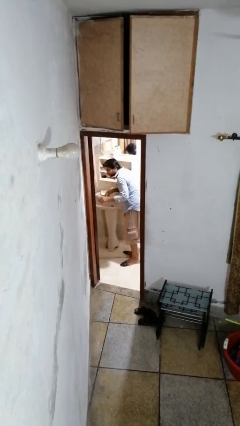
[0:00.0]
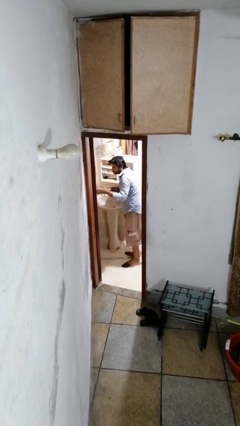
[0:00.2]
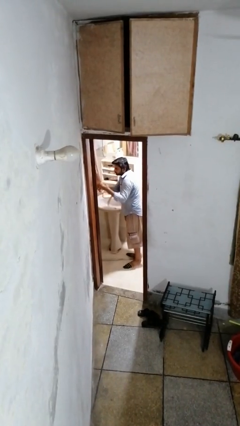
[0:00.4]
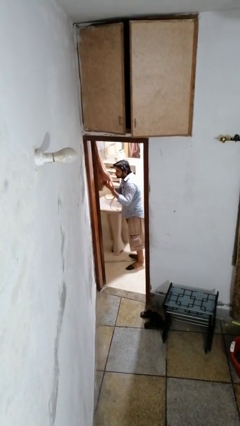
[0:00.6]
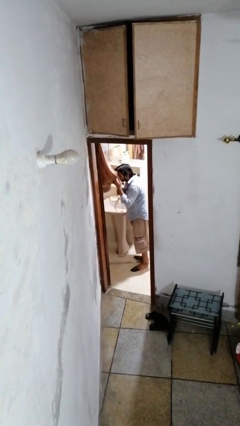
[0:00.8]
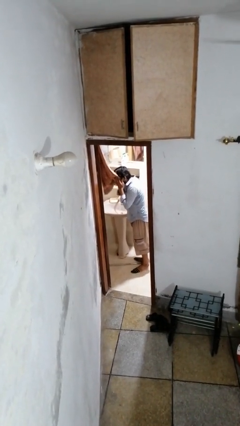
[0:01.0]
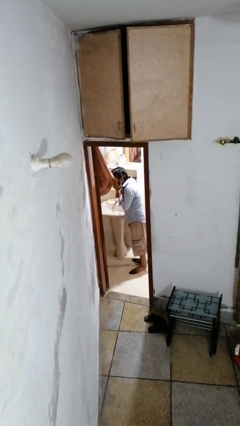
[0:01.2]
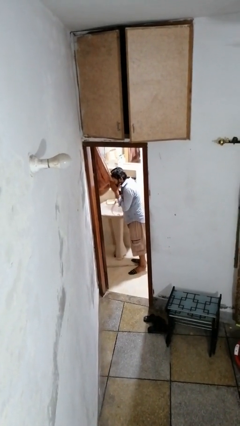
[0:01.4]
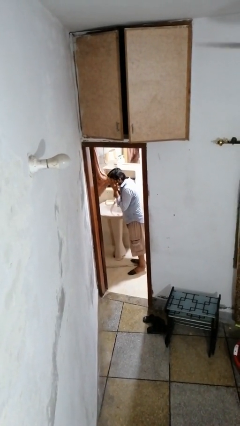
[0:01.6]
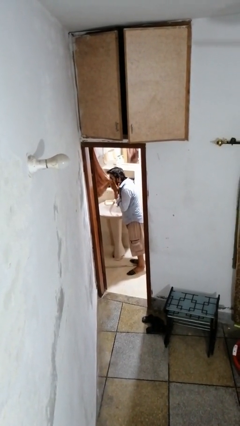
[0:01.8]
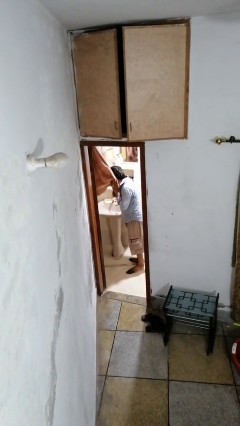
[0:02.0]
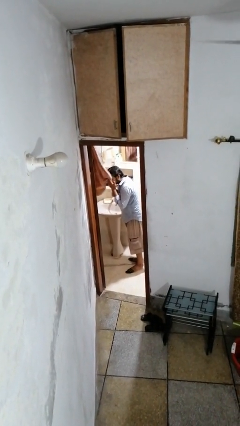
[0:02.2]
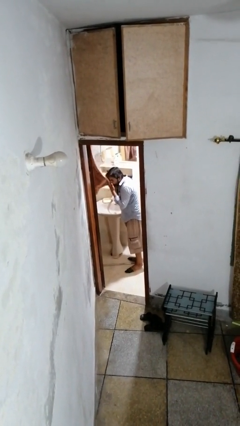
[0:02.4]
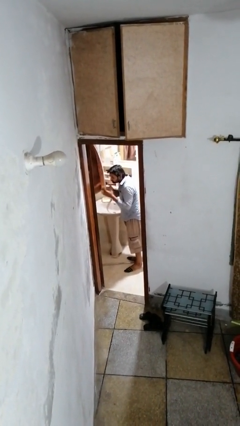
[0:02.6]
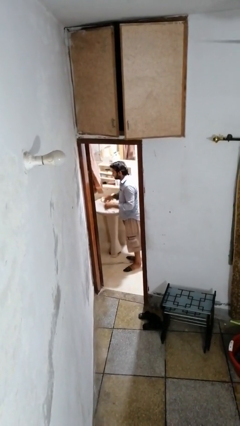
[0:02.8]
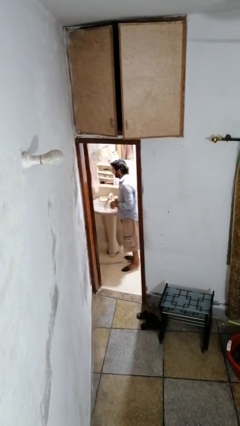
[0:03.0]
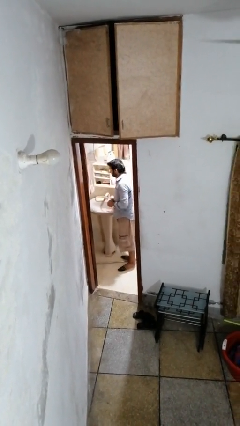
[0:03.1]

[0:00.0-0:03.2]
person dries face with towel

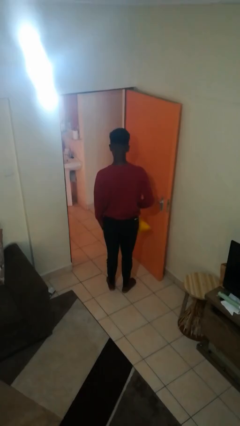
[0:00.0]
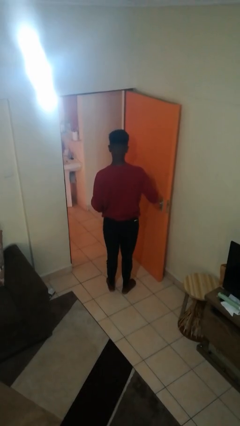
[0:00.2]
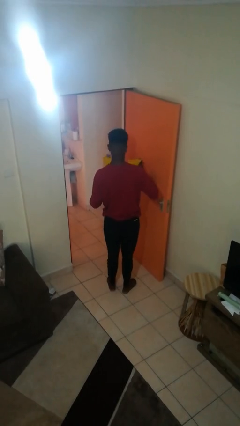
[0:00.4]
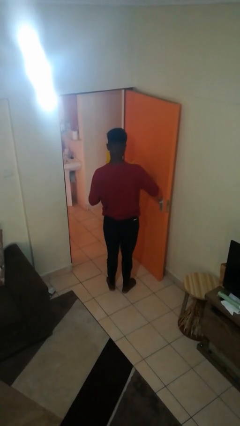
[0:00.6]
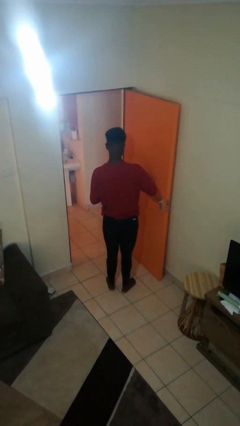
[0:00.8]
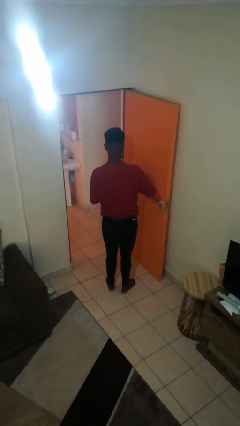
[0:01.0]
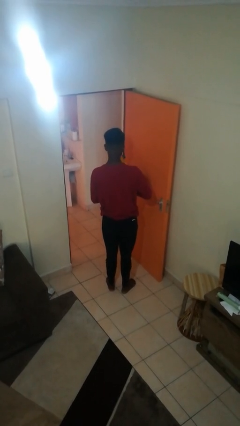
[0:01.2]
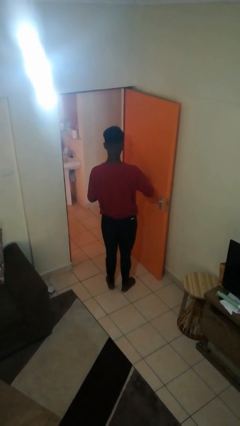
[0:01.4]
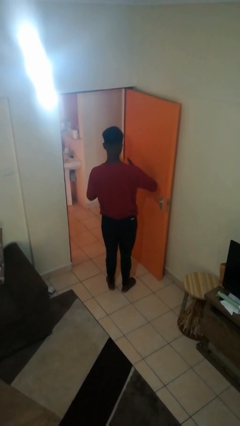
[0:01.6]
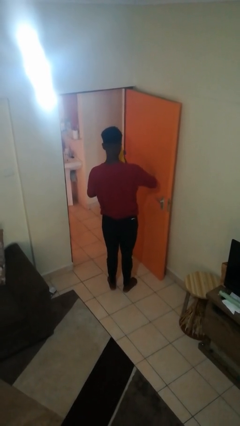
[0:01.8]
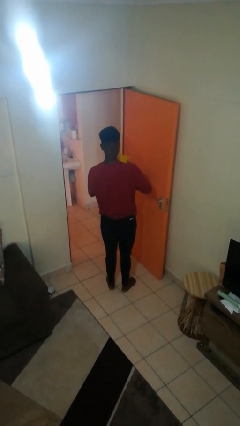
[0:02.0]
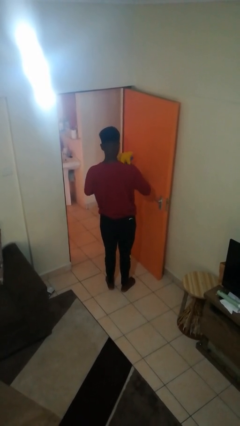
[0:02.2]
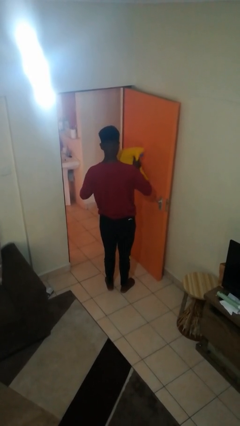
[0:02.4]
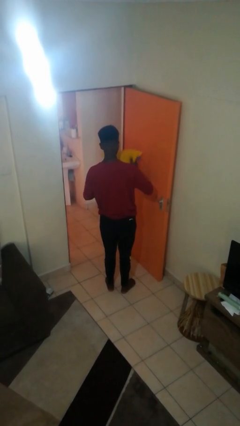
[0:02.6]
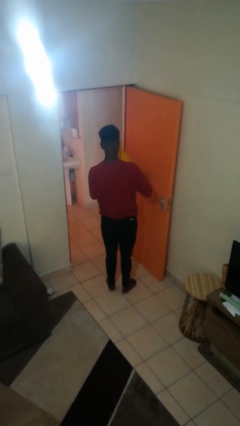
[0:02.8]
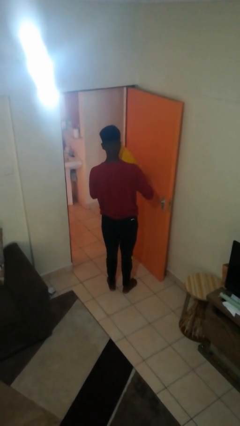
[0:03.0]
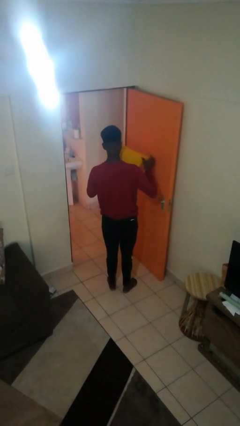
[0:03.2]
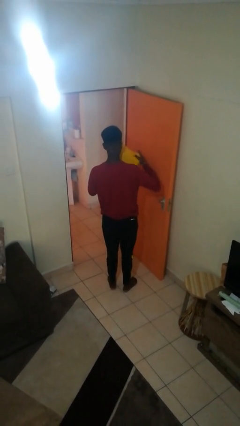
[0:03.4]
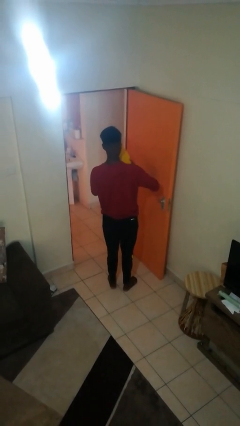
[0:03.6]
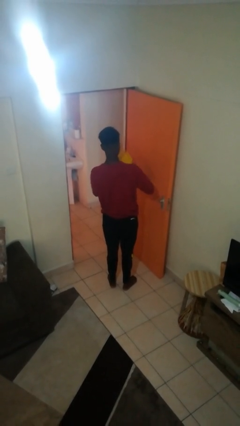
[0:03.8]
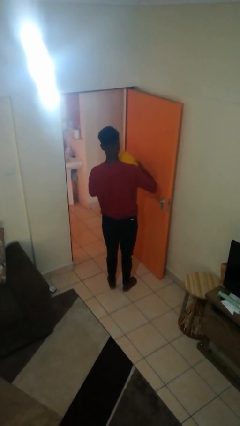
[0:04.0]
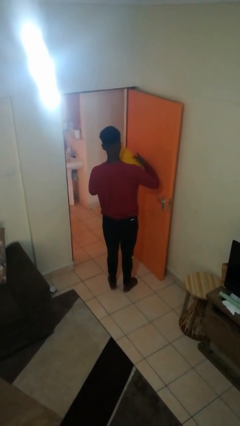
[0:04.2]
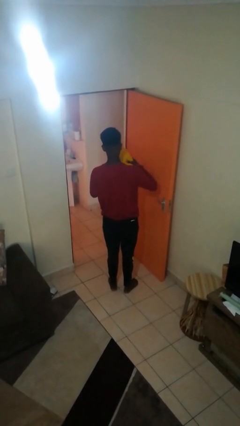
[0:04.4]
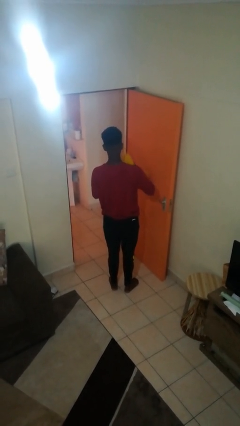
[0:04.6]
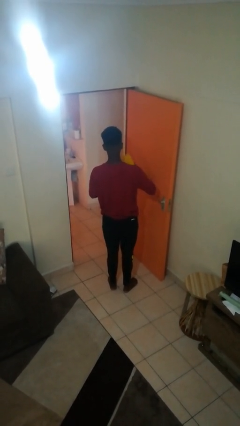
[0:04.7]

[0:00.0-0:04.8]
person squeezes object

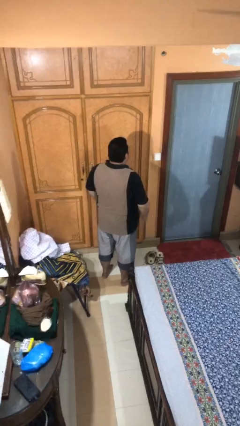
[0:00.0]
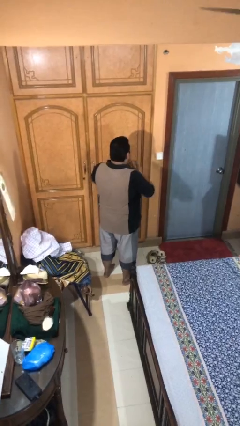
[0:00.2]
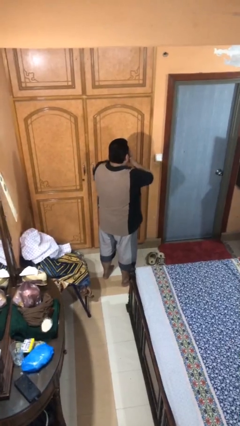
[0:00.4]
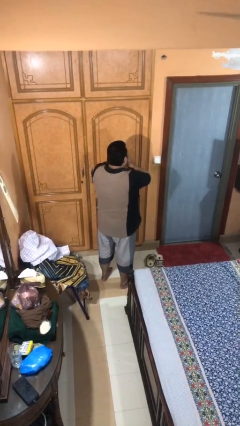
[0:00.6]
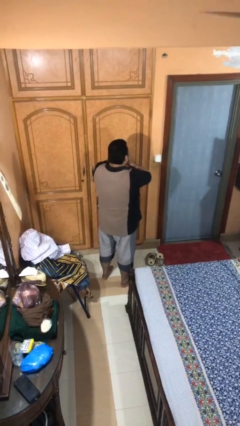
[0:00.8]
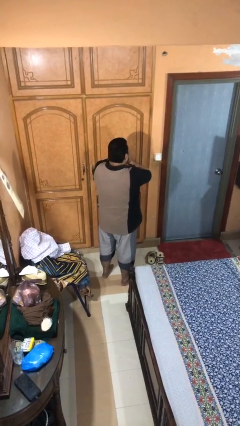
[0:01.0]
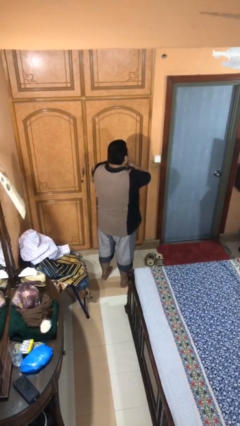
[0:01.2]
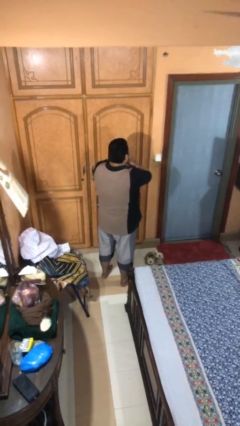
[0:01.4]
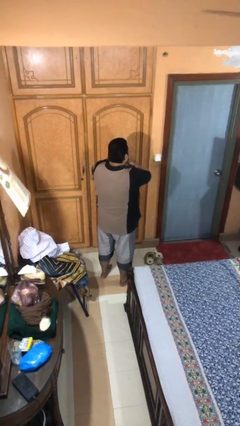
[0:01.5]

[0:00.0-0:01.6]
person covers face with hands

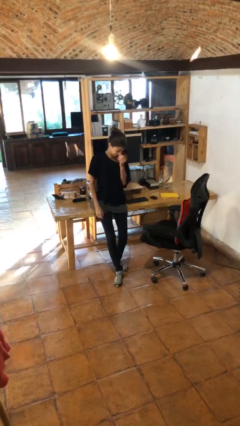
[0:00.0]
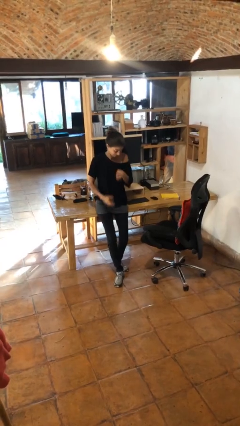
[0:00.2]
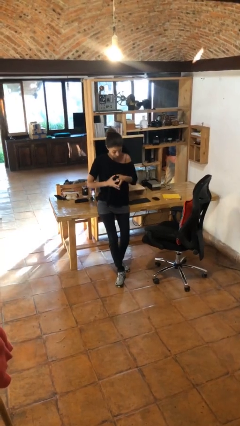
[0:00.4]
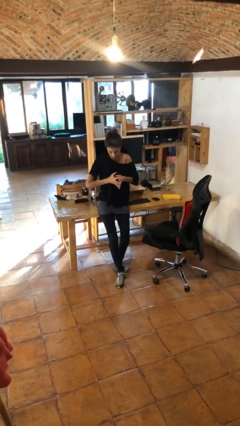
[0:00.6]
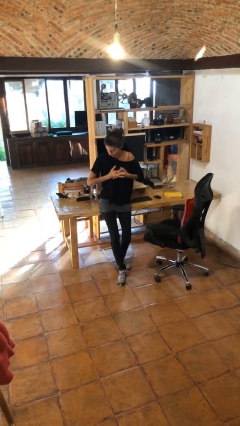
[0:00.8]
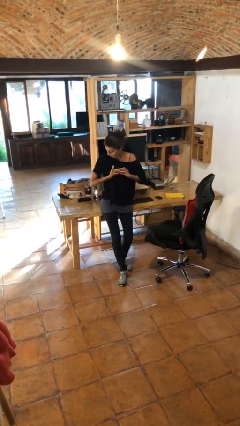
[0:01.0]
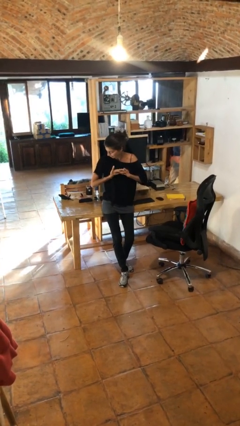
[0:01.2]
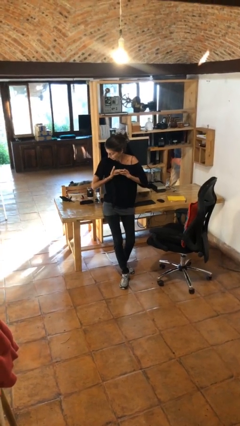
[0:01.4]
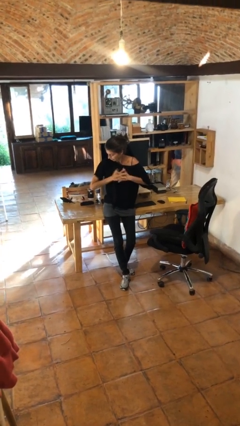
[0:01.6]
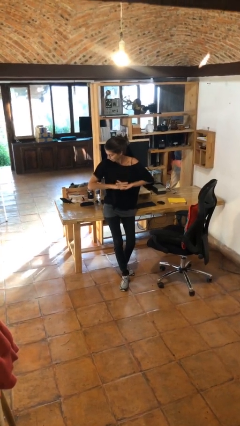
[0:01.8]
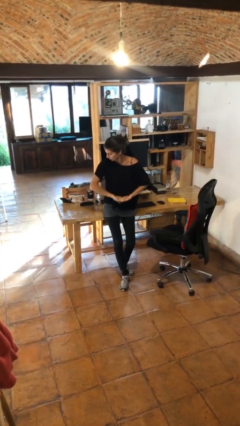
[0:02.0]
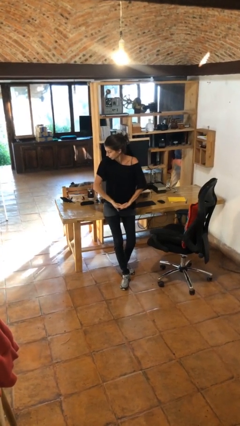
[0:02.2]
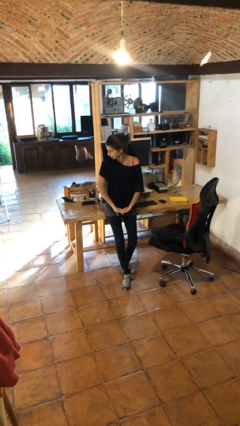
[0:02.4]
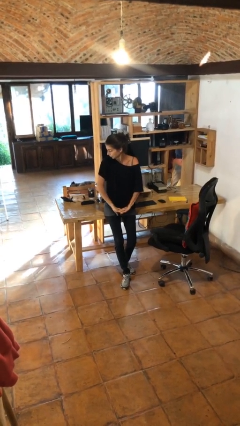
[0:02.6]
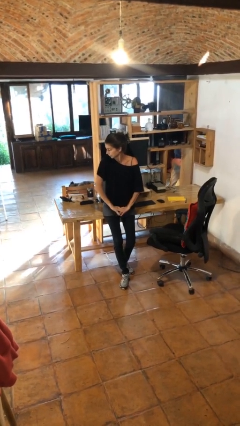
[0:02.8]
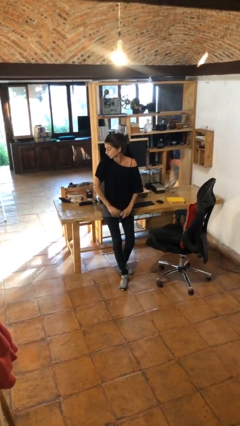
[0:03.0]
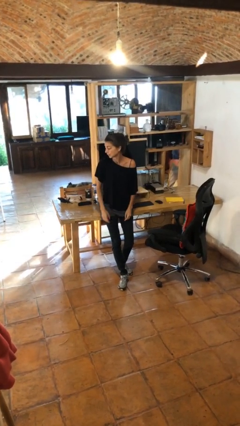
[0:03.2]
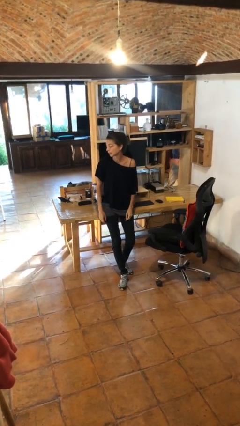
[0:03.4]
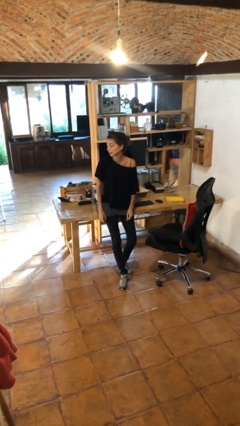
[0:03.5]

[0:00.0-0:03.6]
person cracks knuckles

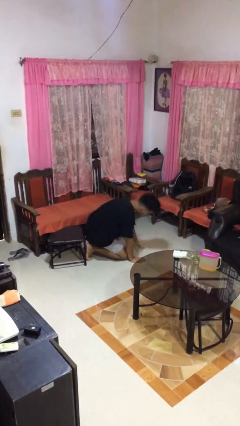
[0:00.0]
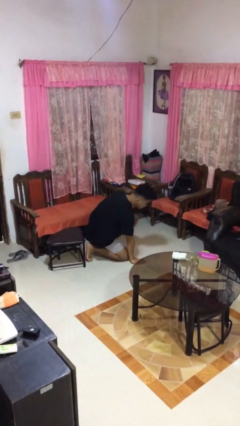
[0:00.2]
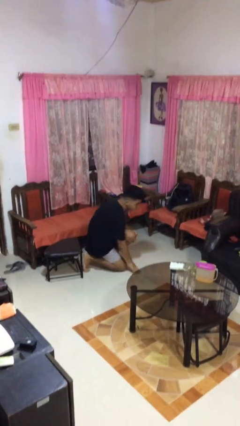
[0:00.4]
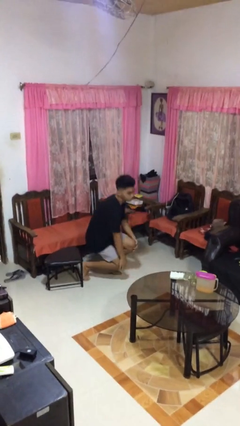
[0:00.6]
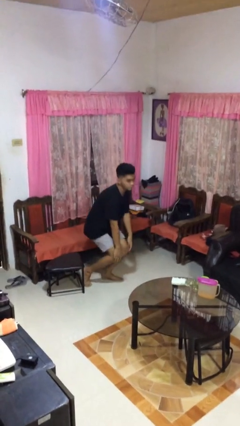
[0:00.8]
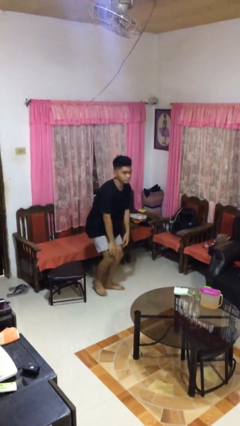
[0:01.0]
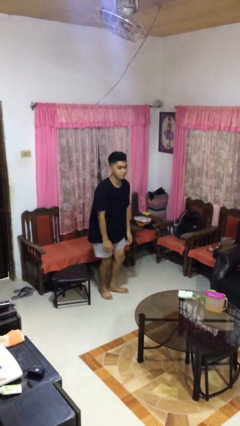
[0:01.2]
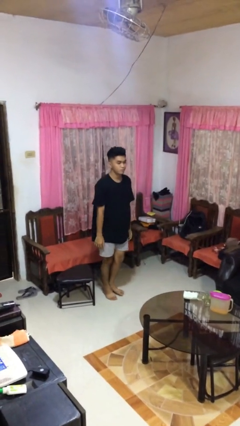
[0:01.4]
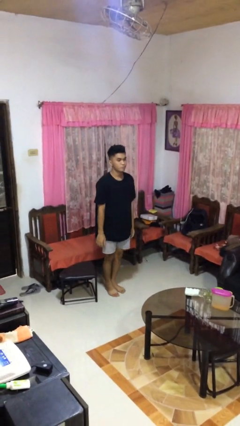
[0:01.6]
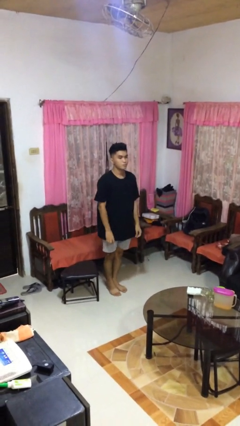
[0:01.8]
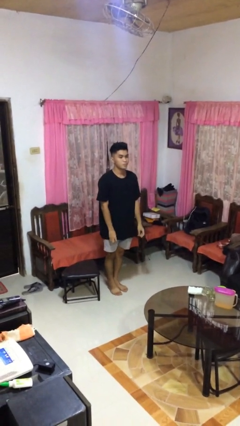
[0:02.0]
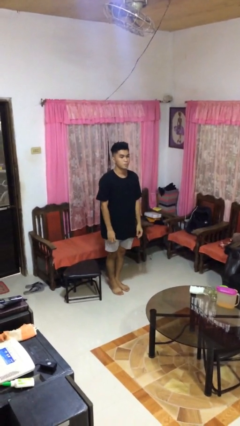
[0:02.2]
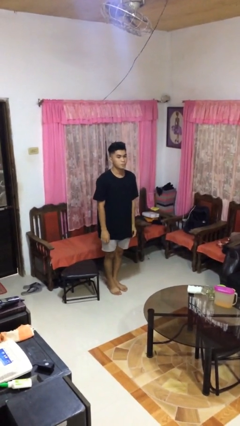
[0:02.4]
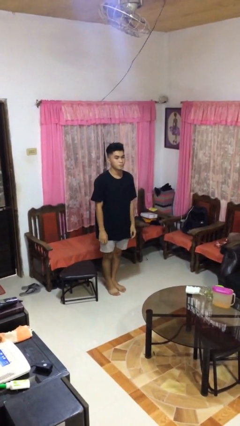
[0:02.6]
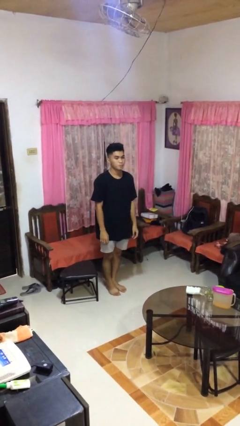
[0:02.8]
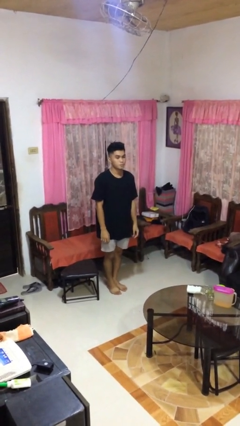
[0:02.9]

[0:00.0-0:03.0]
person stands up from floor

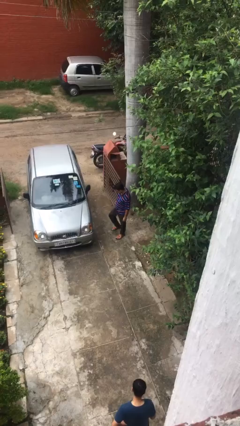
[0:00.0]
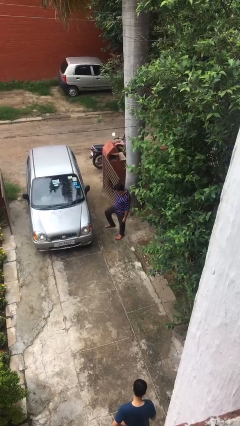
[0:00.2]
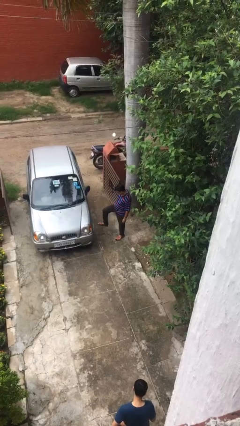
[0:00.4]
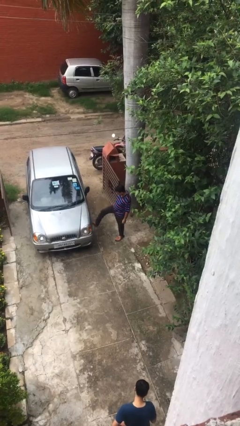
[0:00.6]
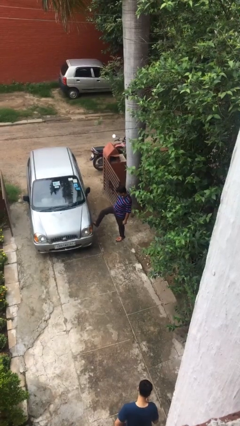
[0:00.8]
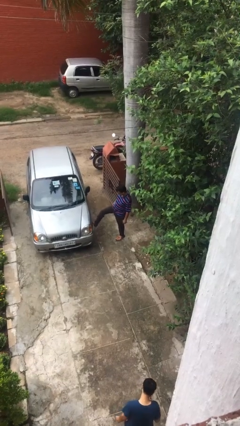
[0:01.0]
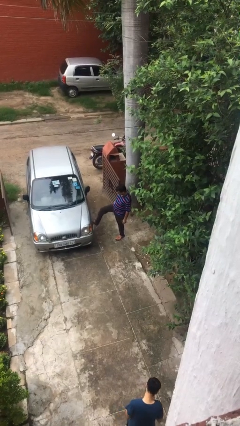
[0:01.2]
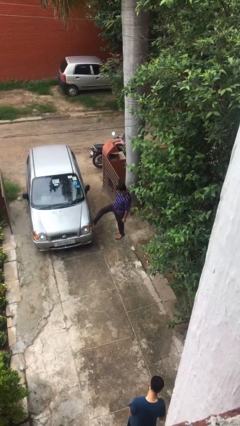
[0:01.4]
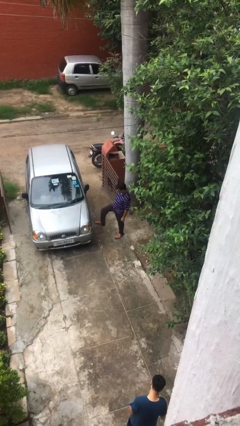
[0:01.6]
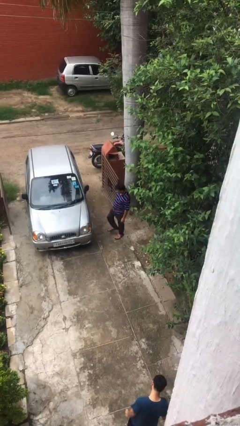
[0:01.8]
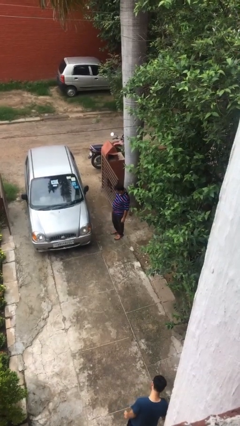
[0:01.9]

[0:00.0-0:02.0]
person kicks car tires
